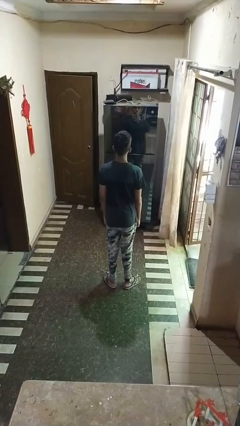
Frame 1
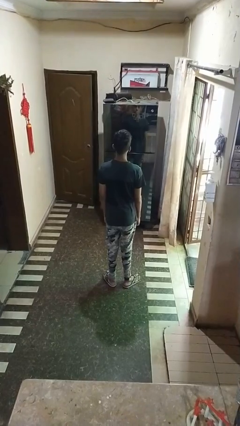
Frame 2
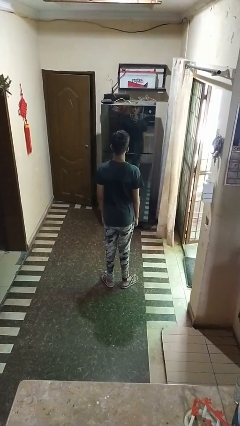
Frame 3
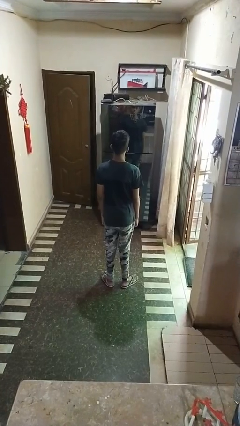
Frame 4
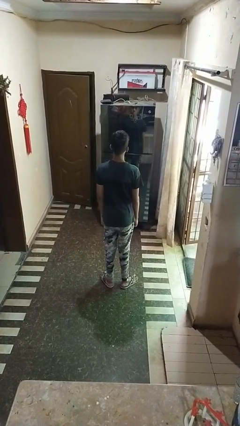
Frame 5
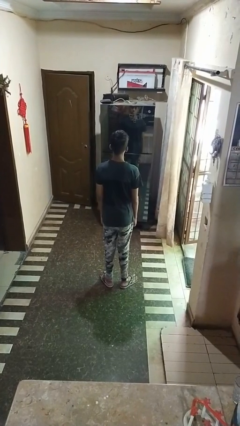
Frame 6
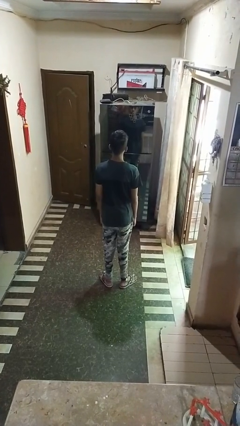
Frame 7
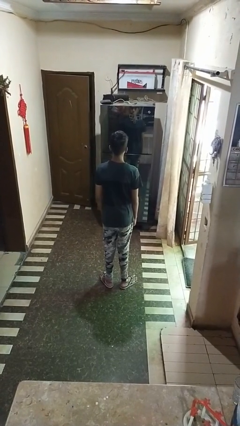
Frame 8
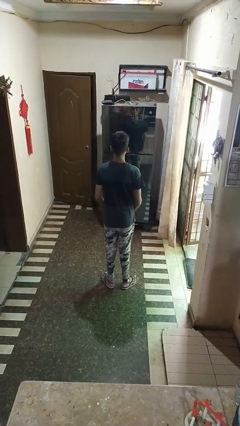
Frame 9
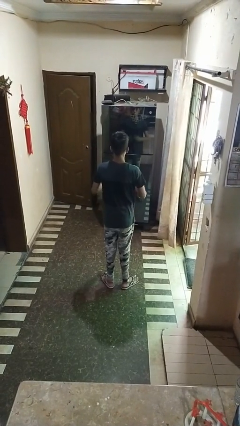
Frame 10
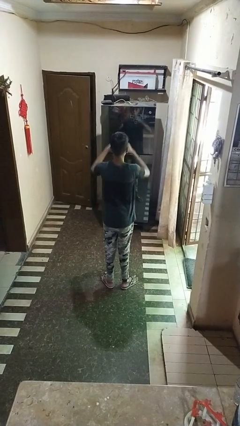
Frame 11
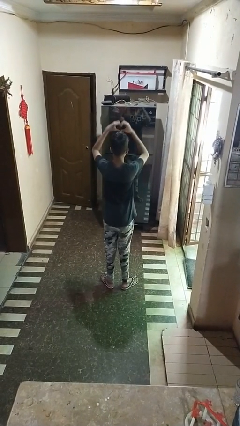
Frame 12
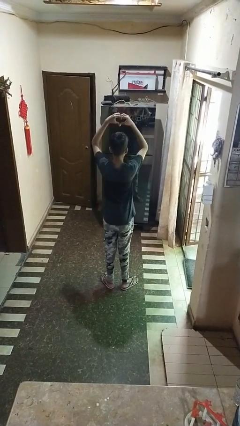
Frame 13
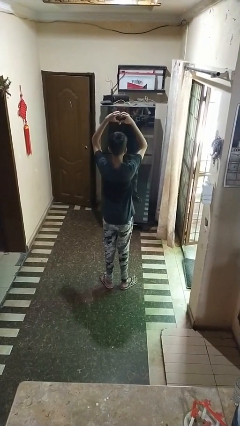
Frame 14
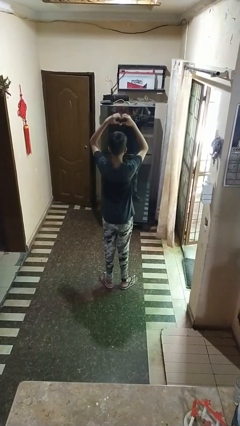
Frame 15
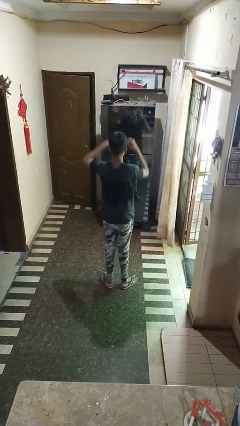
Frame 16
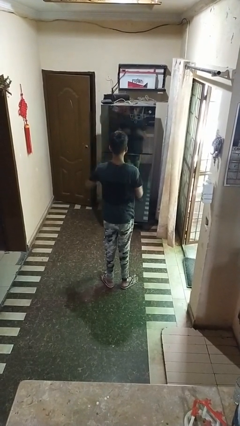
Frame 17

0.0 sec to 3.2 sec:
person gestures heart

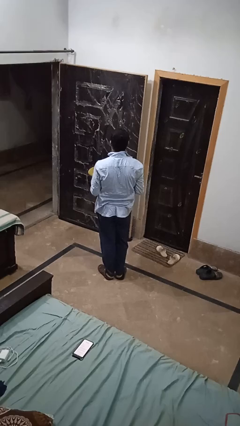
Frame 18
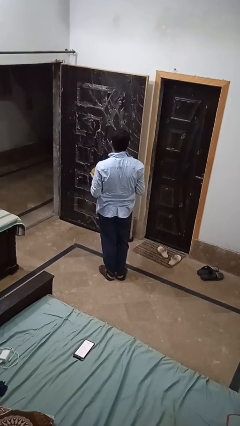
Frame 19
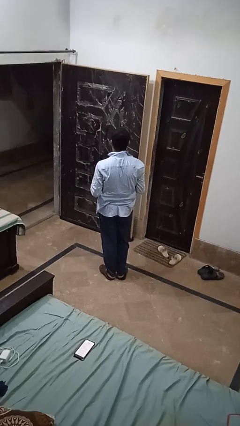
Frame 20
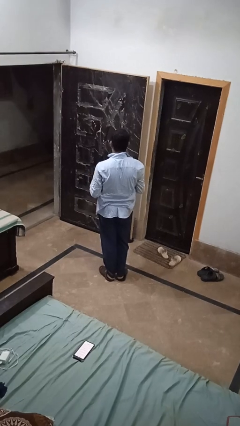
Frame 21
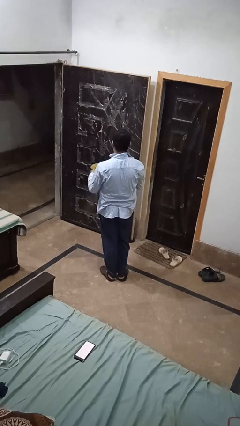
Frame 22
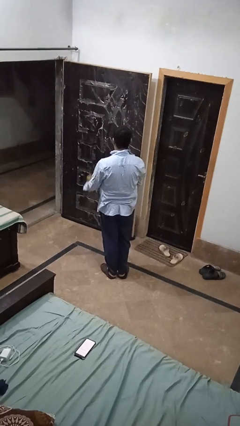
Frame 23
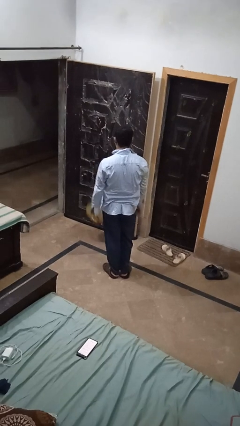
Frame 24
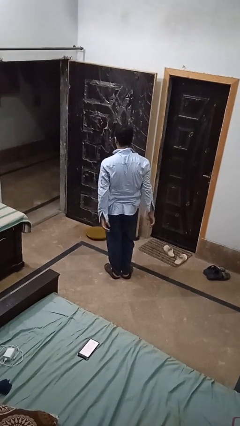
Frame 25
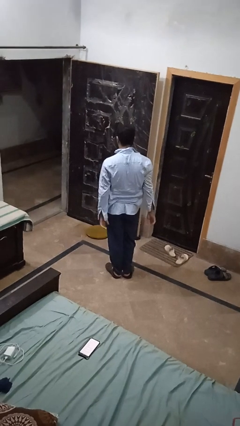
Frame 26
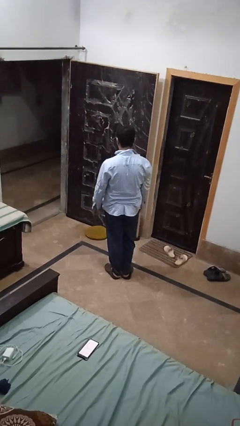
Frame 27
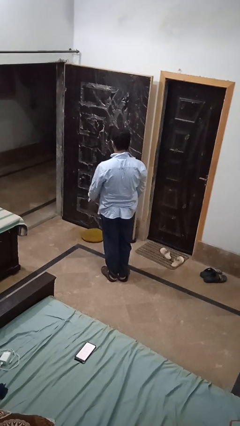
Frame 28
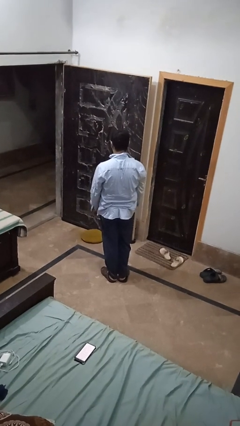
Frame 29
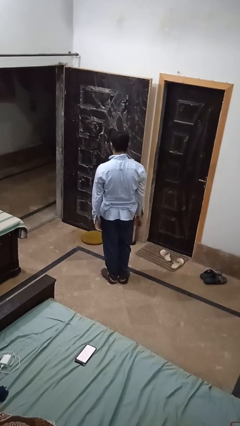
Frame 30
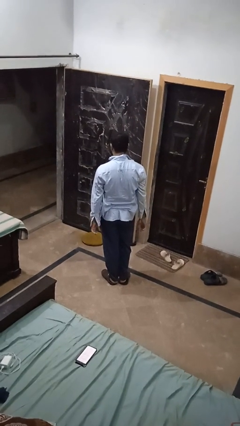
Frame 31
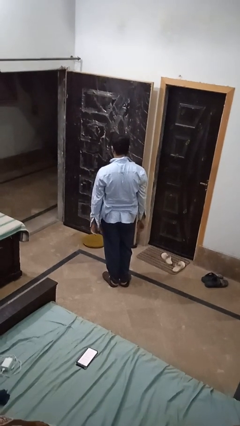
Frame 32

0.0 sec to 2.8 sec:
person throws object to ground

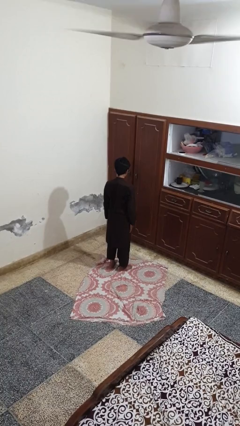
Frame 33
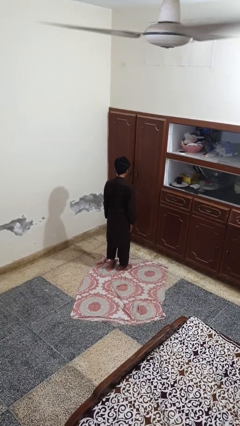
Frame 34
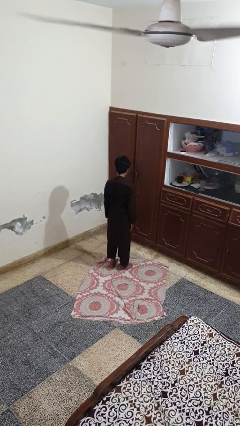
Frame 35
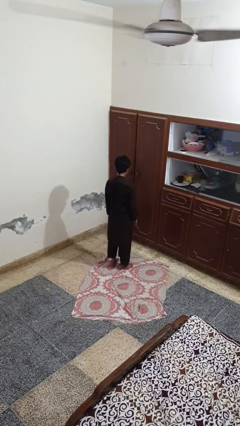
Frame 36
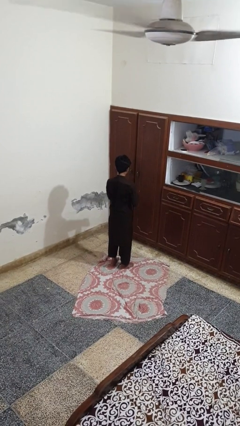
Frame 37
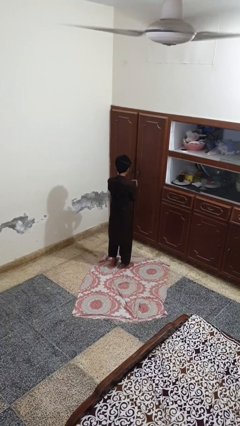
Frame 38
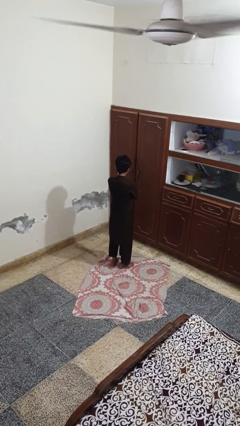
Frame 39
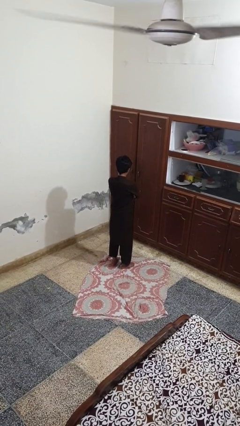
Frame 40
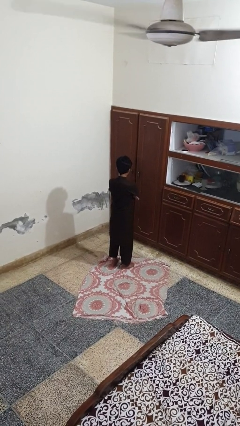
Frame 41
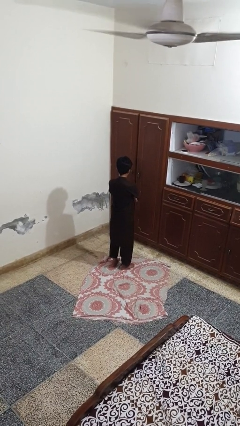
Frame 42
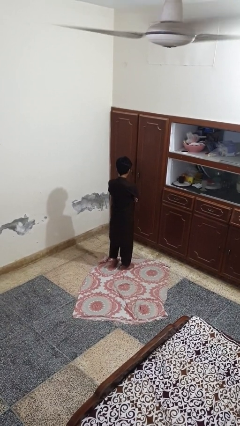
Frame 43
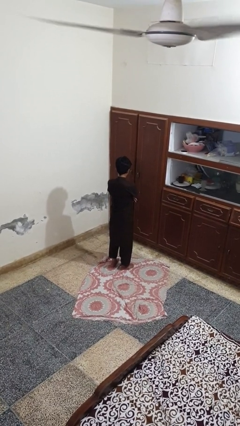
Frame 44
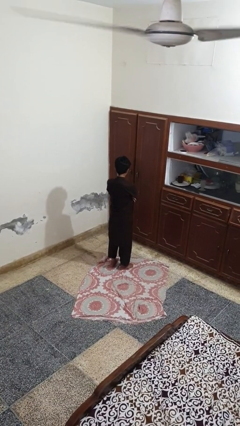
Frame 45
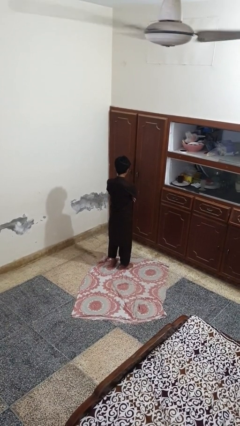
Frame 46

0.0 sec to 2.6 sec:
person crosses arms

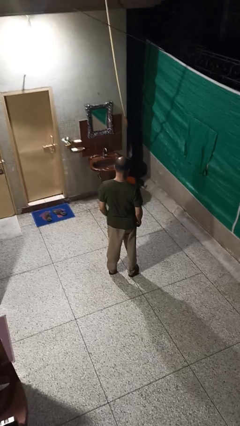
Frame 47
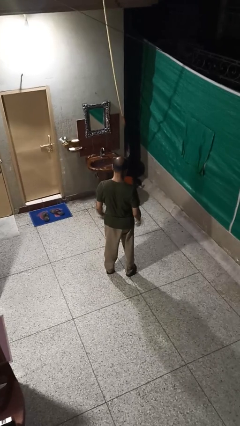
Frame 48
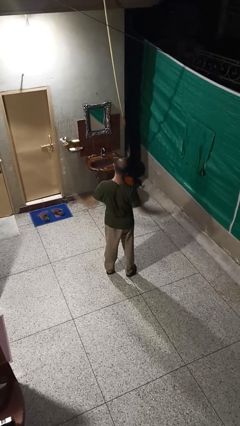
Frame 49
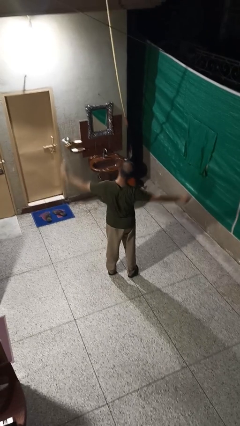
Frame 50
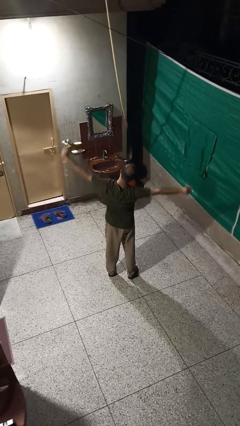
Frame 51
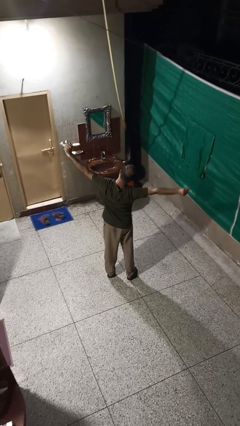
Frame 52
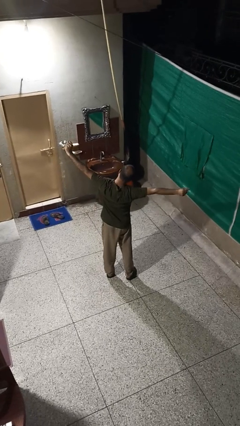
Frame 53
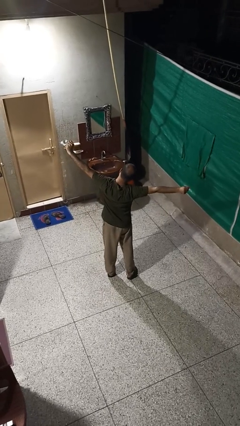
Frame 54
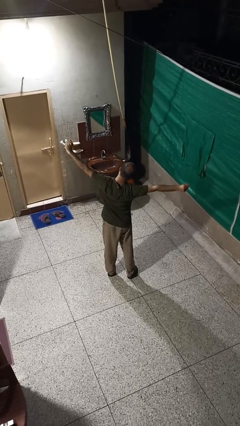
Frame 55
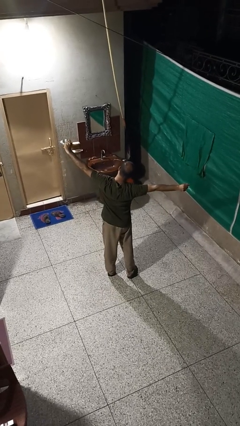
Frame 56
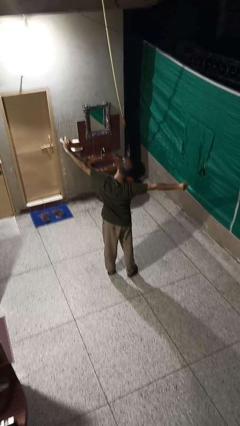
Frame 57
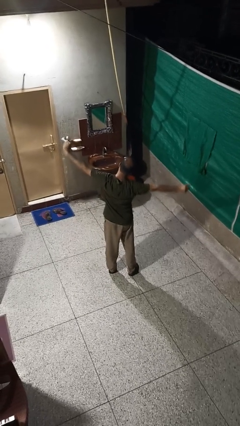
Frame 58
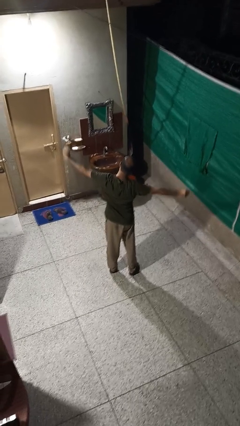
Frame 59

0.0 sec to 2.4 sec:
person stretches arms to side

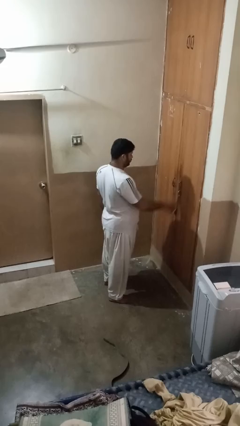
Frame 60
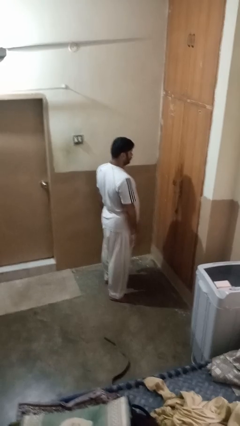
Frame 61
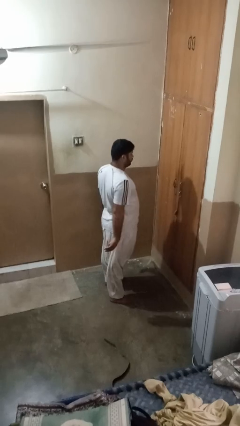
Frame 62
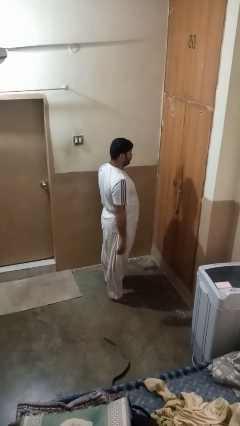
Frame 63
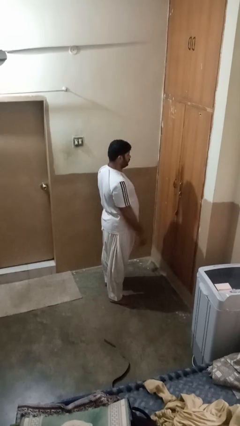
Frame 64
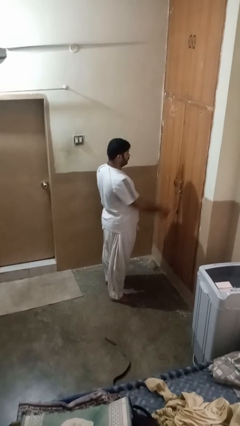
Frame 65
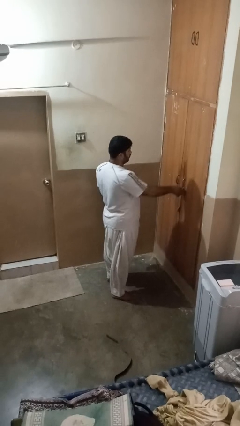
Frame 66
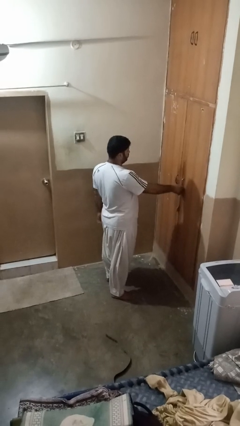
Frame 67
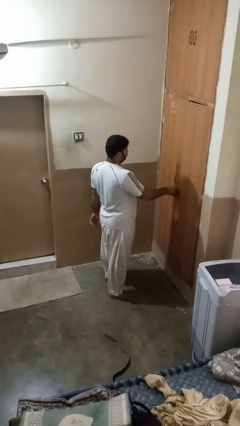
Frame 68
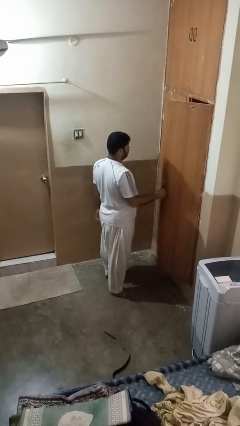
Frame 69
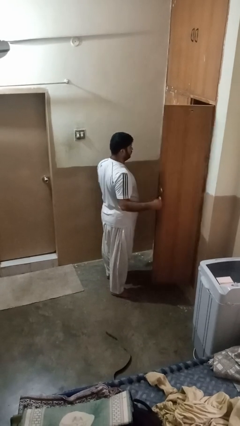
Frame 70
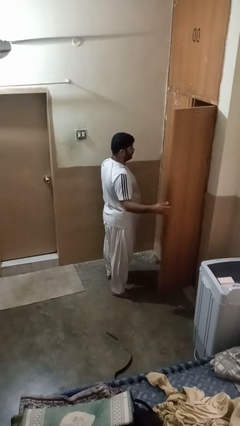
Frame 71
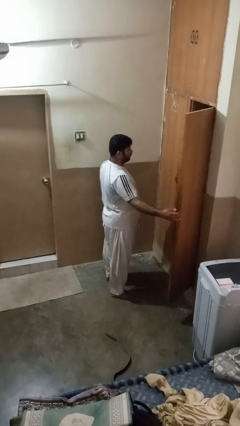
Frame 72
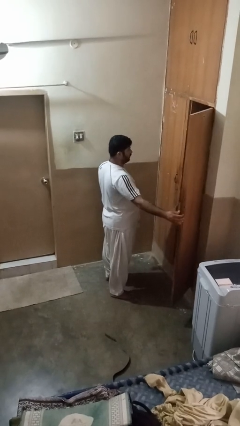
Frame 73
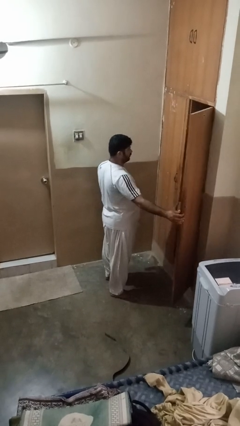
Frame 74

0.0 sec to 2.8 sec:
person opens closet door

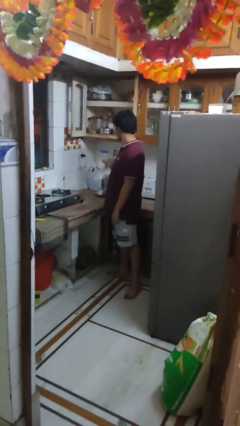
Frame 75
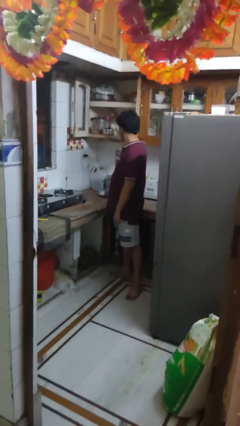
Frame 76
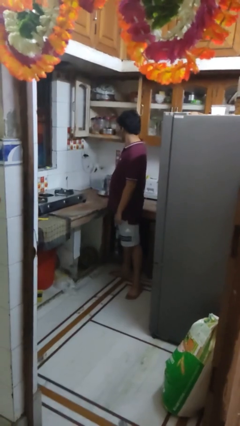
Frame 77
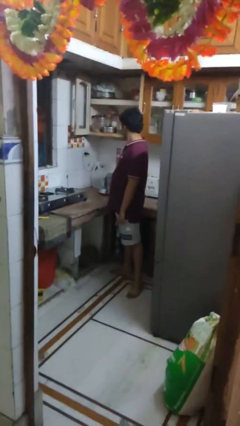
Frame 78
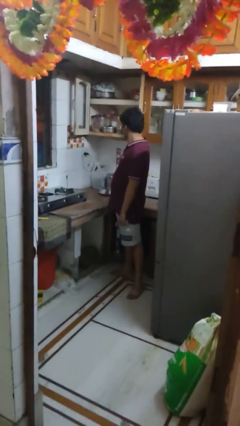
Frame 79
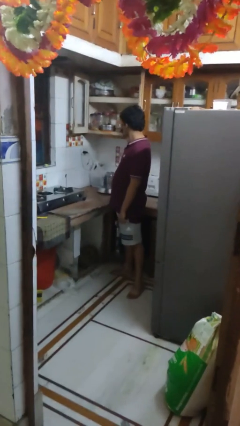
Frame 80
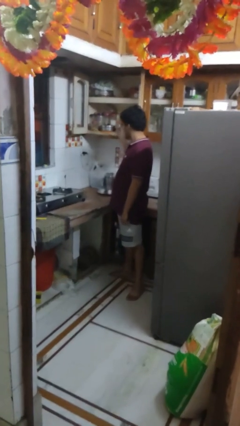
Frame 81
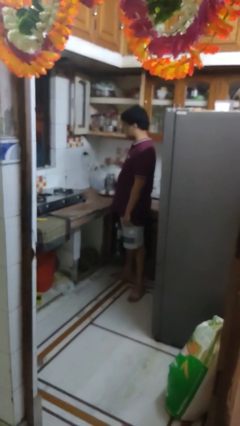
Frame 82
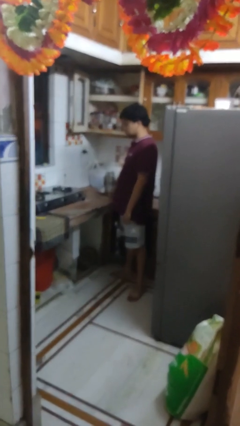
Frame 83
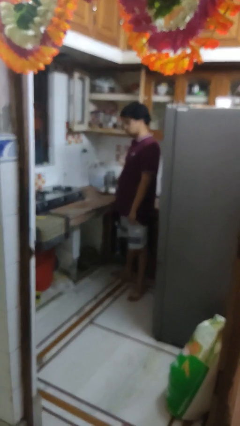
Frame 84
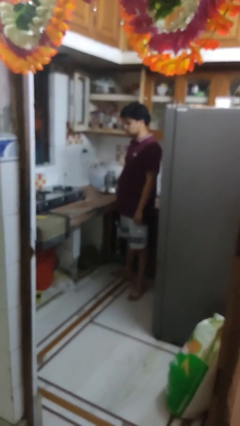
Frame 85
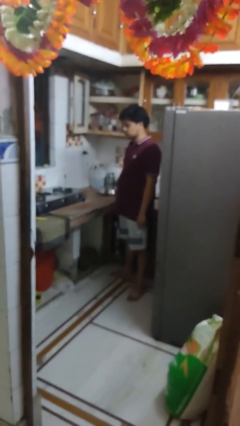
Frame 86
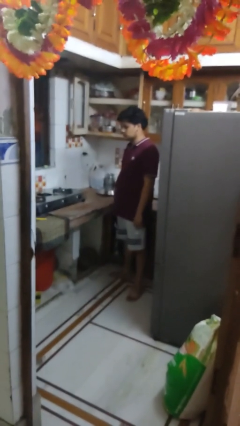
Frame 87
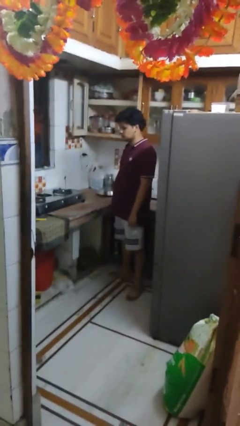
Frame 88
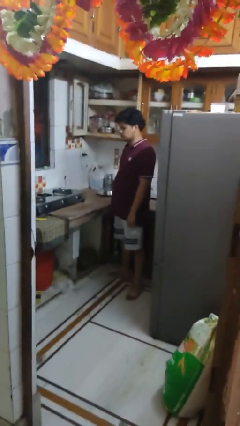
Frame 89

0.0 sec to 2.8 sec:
person puts object in cabinet

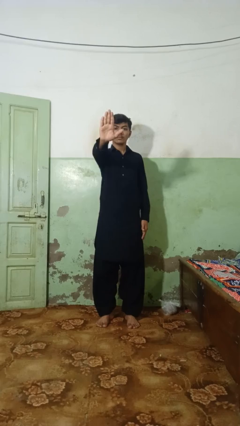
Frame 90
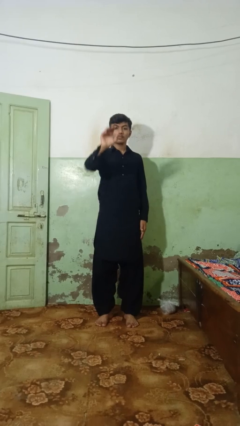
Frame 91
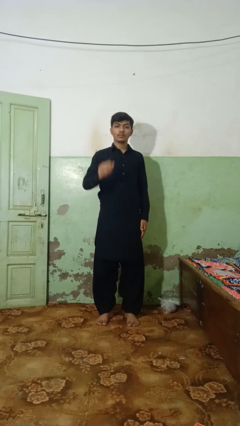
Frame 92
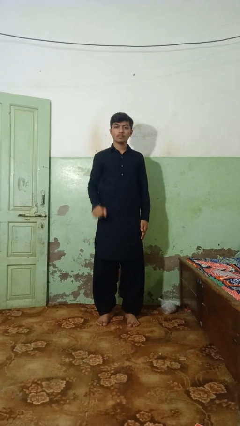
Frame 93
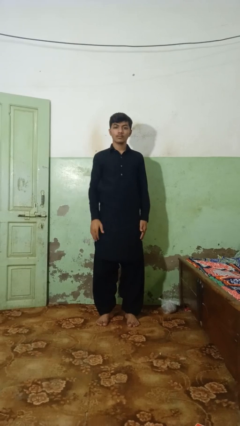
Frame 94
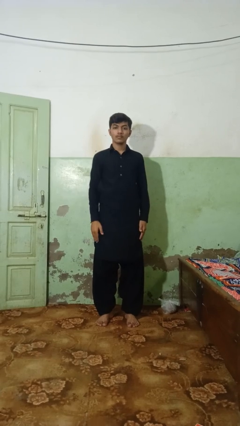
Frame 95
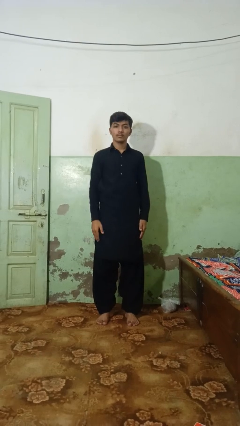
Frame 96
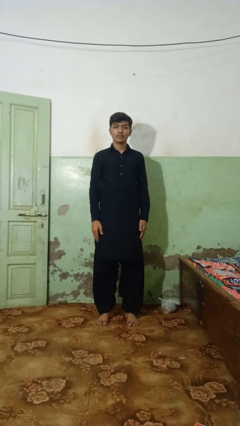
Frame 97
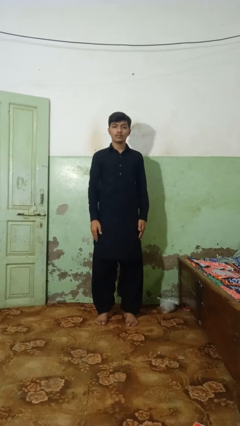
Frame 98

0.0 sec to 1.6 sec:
person gestures stop
